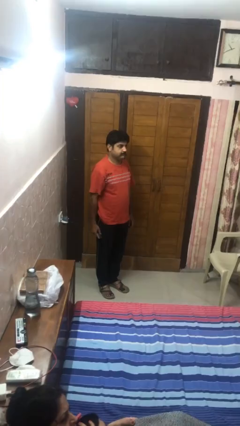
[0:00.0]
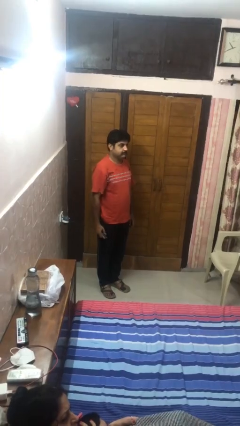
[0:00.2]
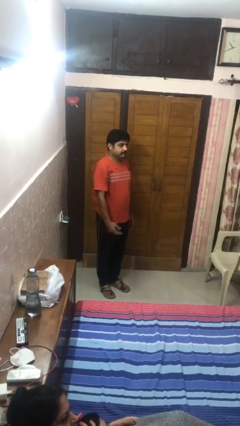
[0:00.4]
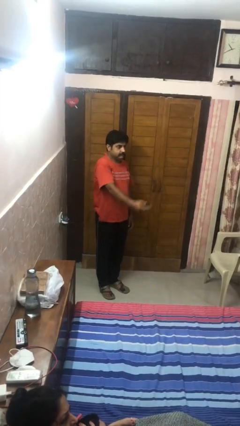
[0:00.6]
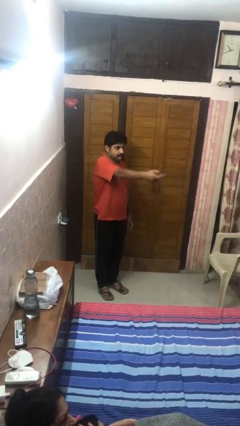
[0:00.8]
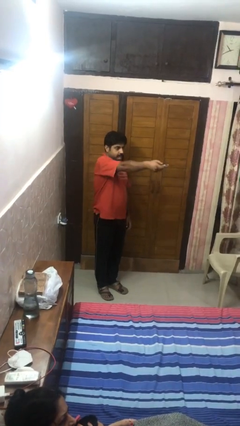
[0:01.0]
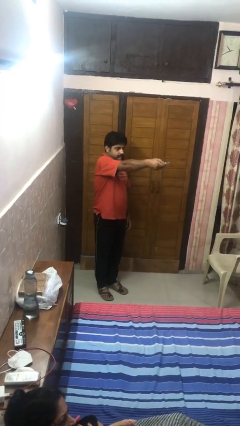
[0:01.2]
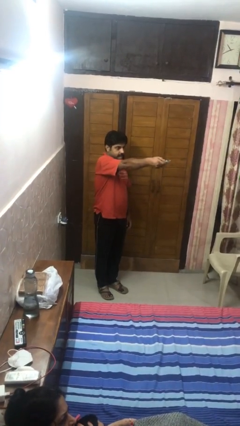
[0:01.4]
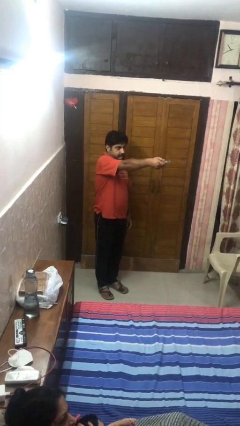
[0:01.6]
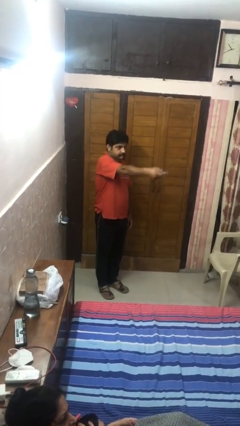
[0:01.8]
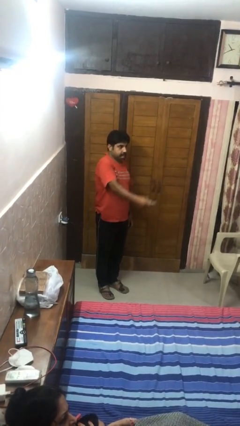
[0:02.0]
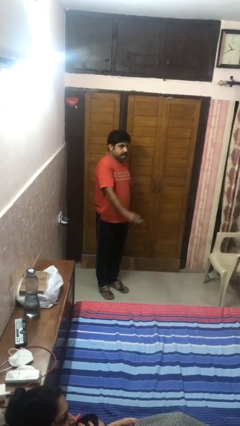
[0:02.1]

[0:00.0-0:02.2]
person uses television remote

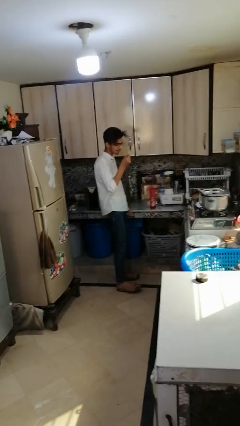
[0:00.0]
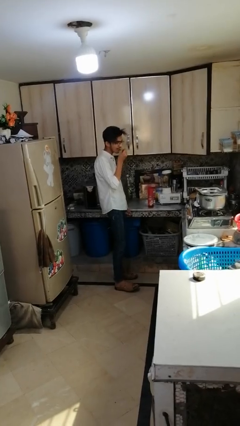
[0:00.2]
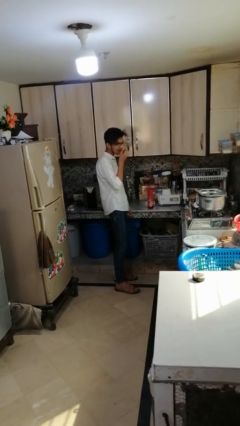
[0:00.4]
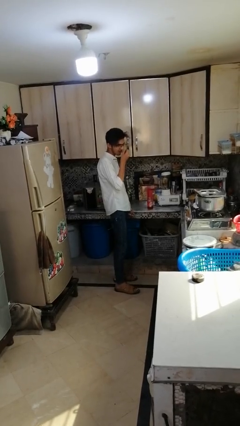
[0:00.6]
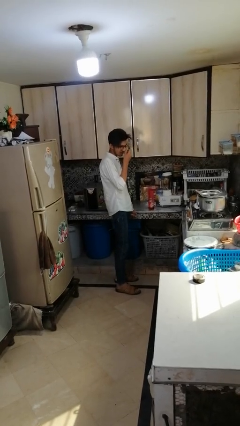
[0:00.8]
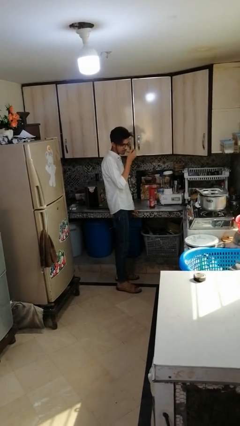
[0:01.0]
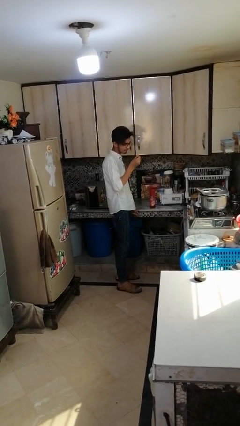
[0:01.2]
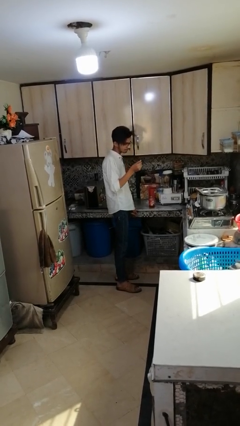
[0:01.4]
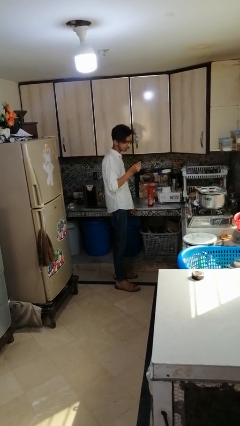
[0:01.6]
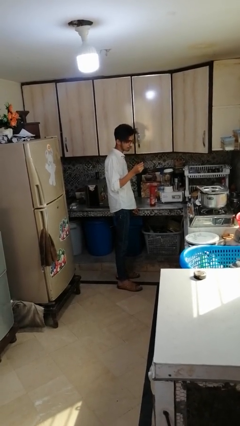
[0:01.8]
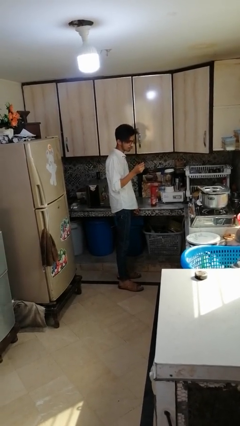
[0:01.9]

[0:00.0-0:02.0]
person eats with utensil

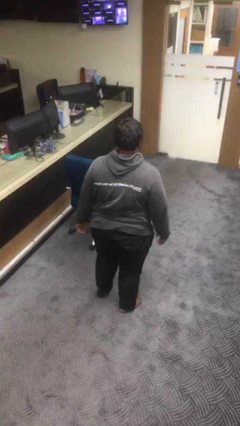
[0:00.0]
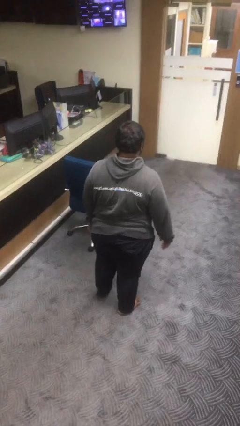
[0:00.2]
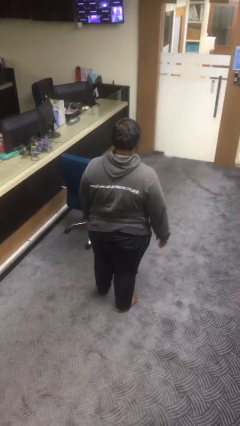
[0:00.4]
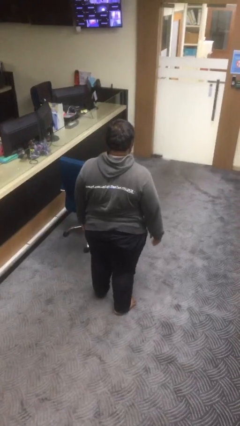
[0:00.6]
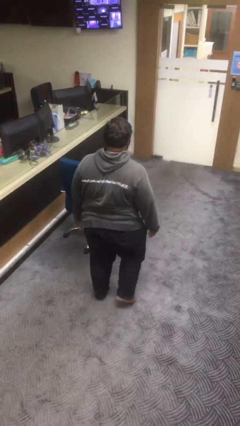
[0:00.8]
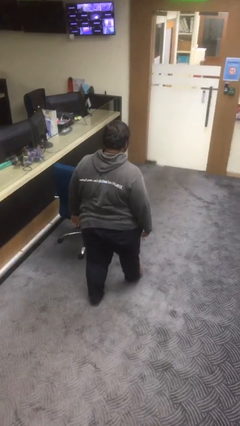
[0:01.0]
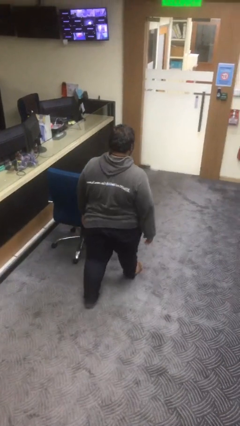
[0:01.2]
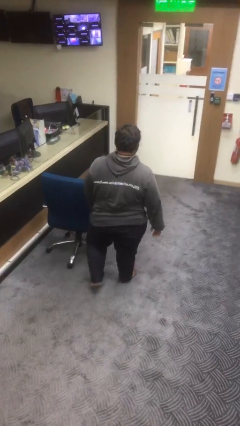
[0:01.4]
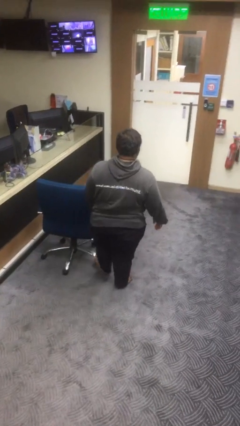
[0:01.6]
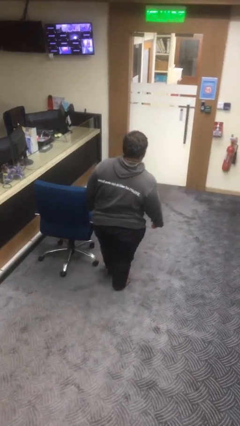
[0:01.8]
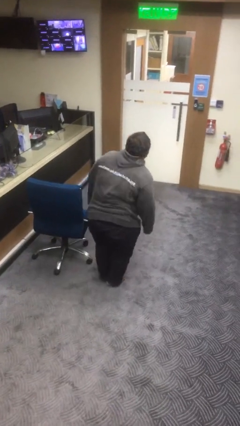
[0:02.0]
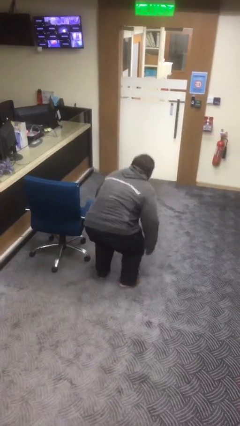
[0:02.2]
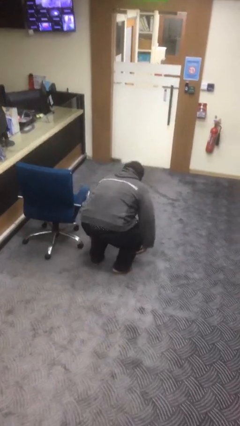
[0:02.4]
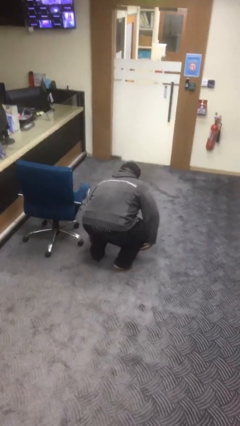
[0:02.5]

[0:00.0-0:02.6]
person stubs toe

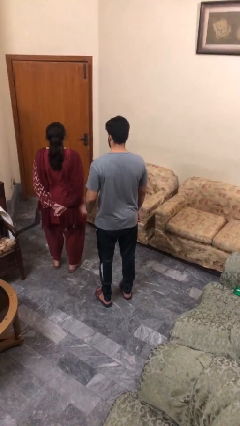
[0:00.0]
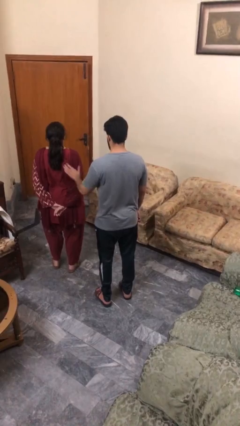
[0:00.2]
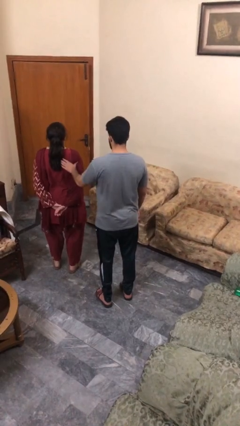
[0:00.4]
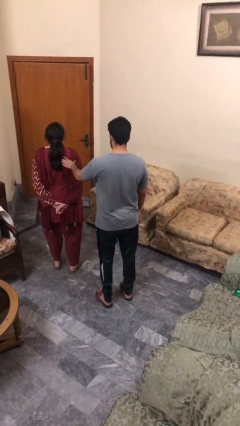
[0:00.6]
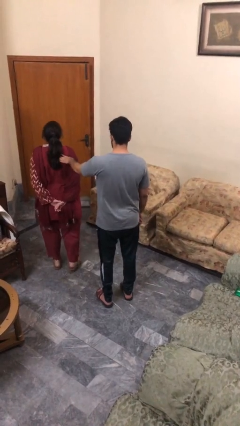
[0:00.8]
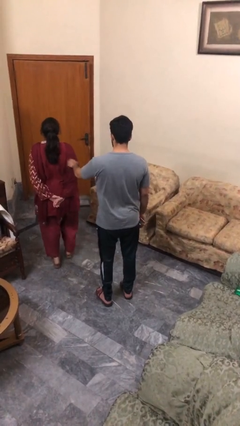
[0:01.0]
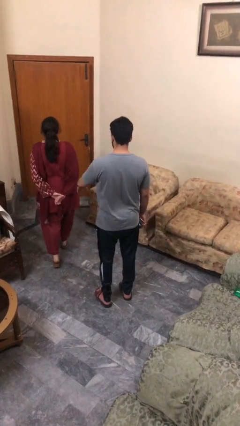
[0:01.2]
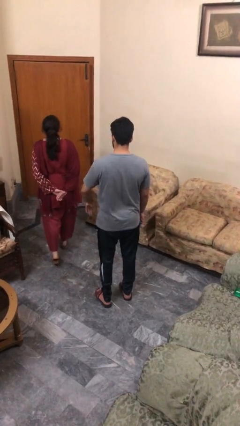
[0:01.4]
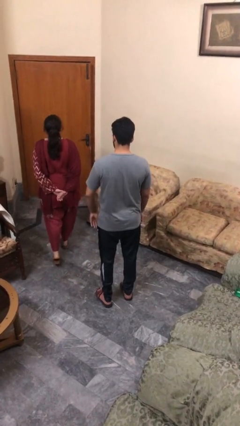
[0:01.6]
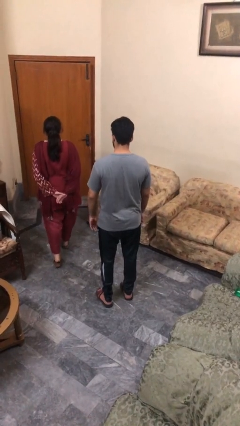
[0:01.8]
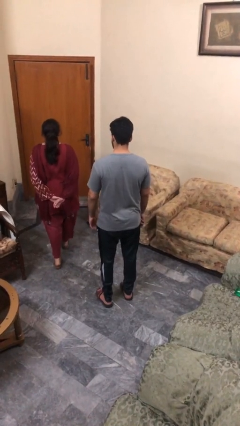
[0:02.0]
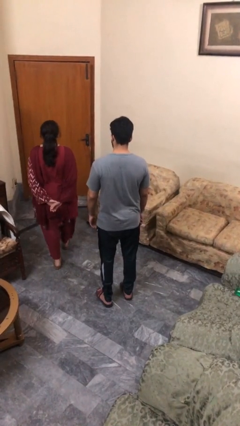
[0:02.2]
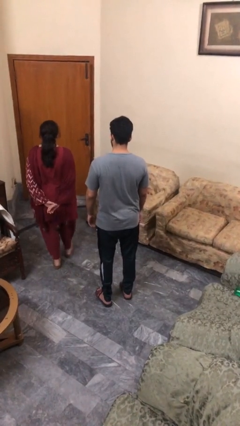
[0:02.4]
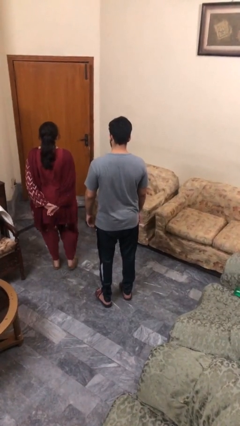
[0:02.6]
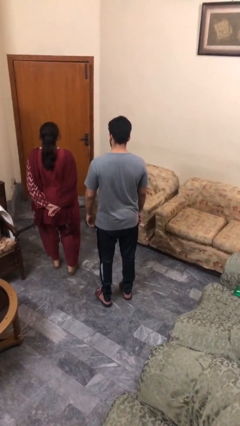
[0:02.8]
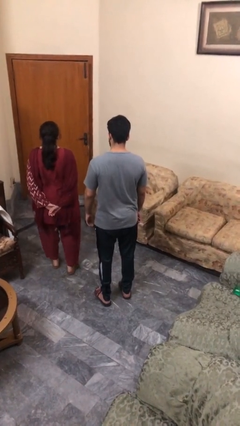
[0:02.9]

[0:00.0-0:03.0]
person shoves person

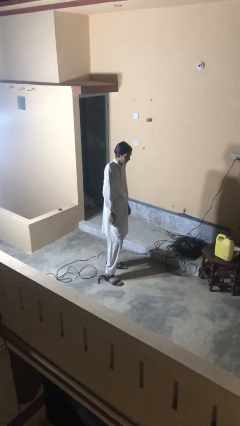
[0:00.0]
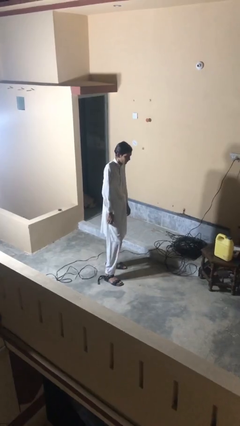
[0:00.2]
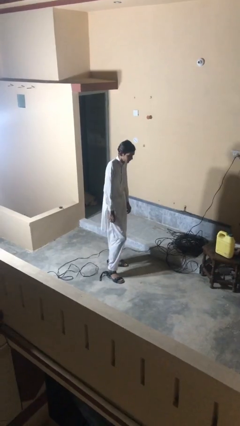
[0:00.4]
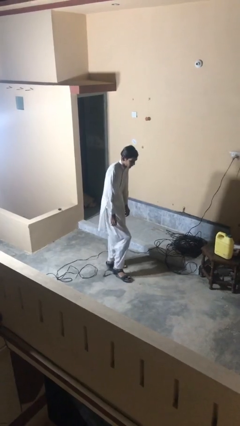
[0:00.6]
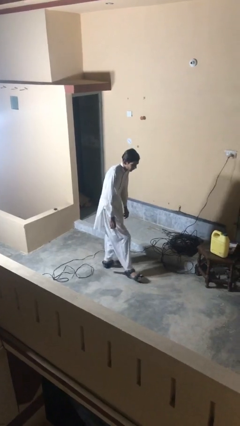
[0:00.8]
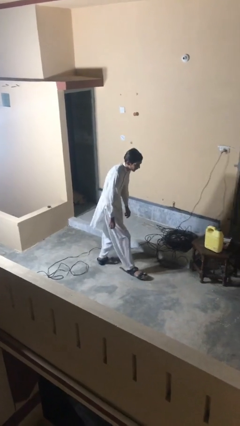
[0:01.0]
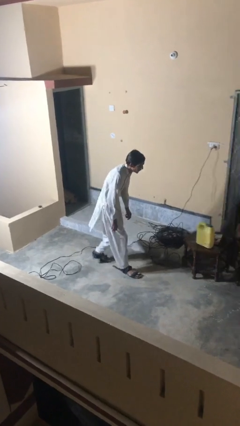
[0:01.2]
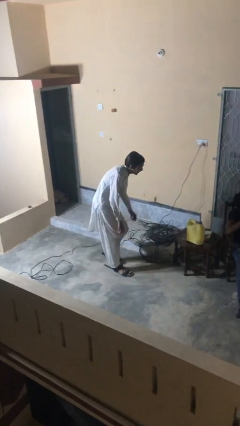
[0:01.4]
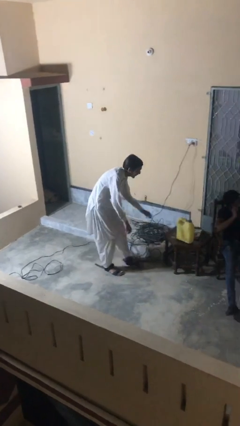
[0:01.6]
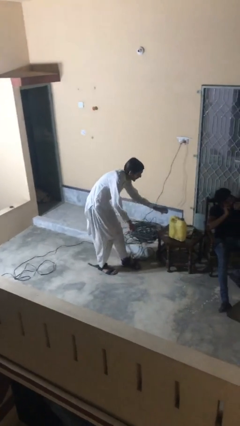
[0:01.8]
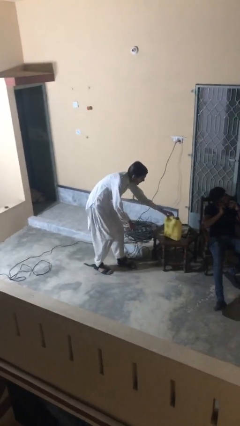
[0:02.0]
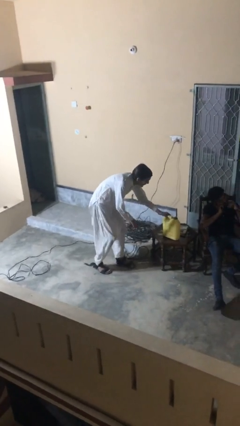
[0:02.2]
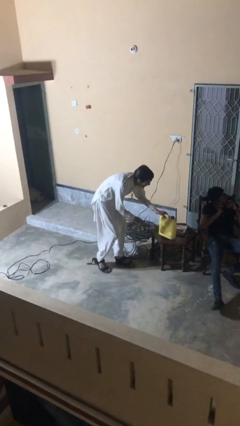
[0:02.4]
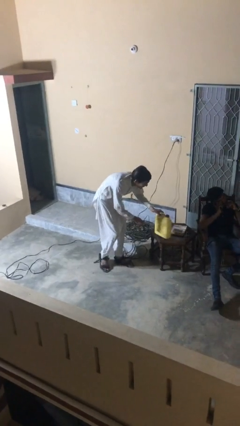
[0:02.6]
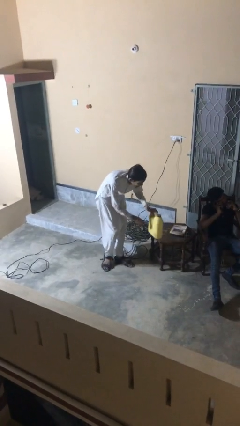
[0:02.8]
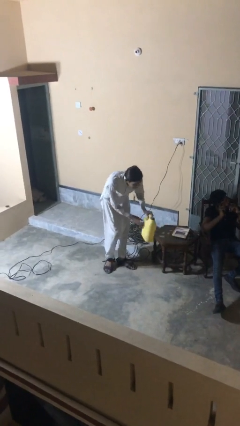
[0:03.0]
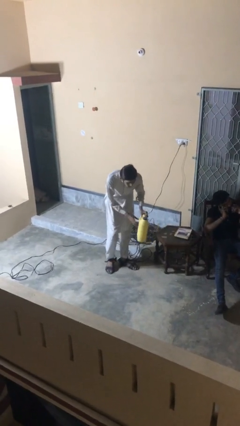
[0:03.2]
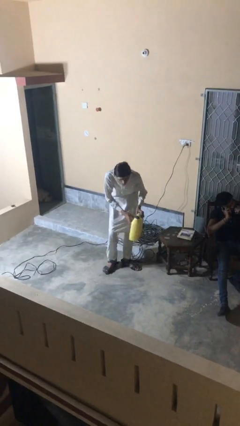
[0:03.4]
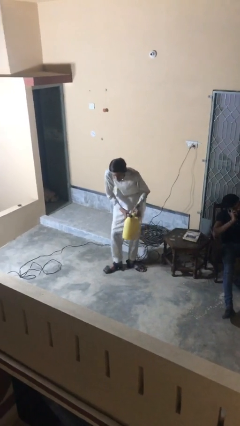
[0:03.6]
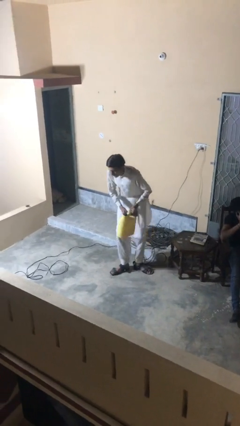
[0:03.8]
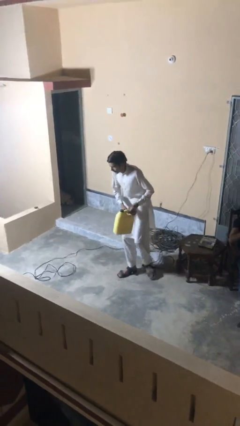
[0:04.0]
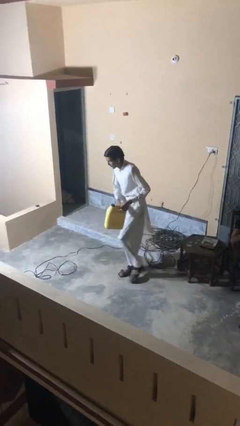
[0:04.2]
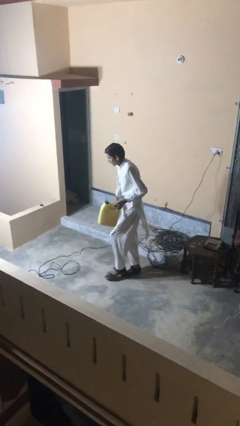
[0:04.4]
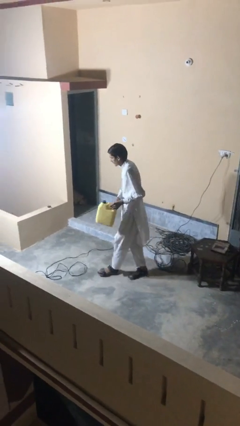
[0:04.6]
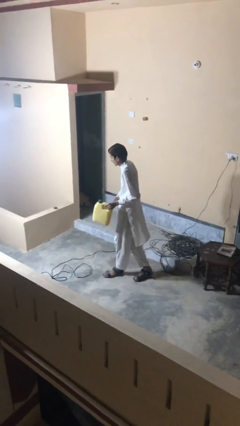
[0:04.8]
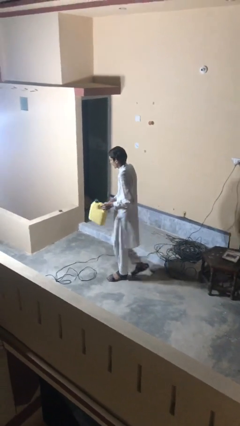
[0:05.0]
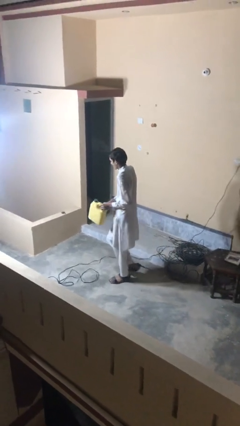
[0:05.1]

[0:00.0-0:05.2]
person steals object from person

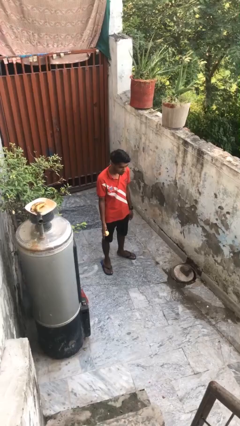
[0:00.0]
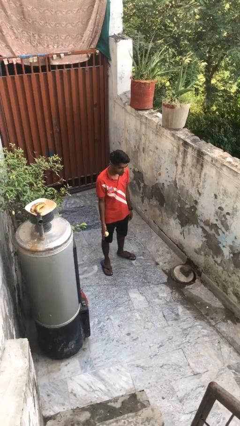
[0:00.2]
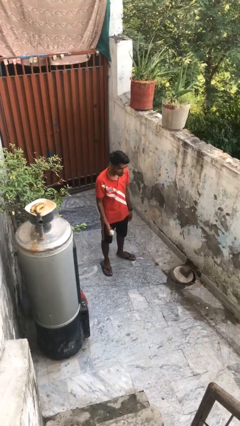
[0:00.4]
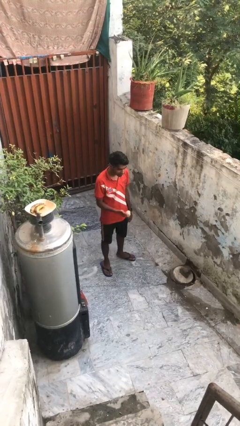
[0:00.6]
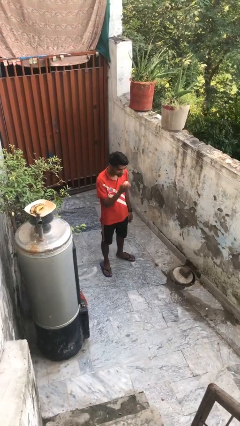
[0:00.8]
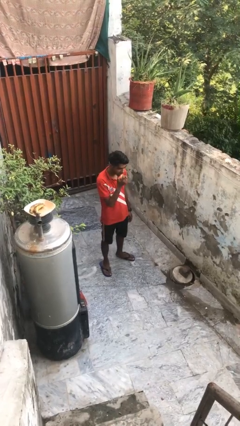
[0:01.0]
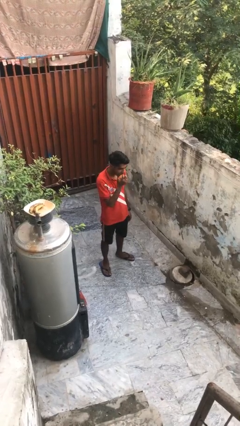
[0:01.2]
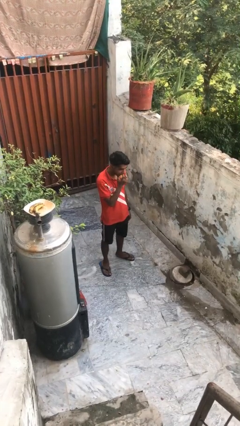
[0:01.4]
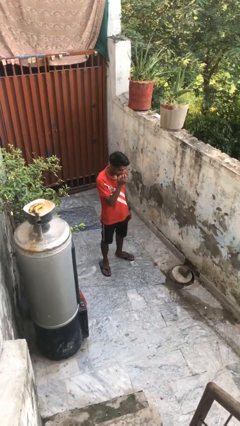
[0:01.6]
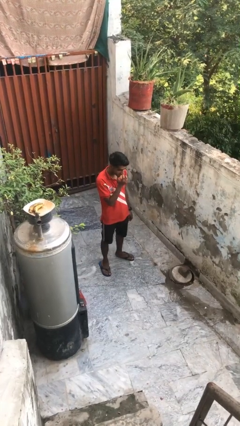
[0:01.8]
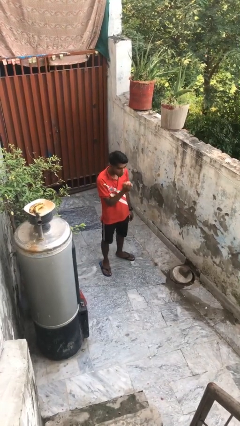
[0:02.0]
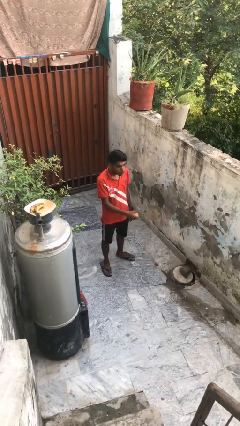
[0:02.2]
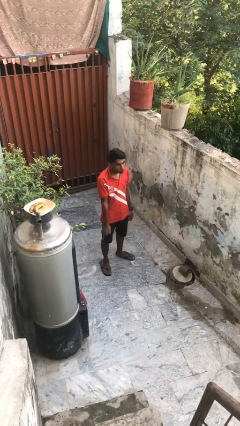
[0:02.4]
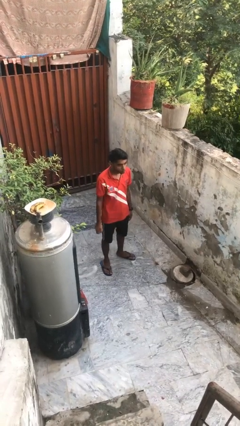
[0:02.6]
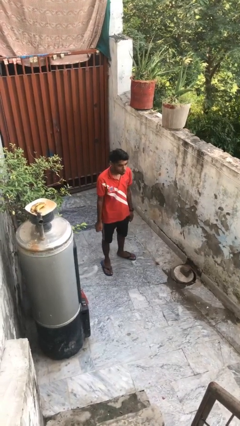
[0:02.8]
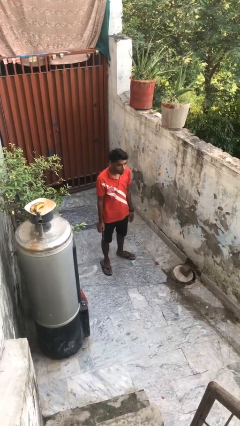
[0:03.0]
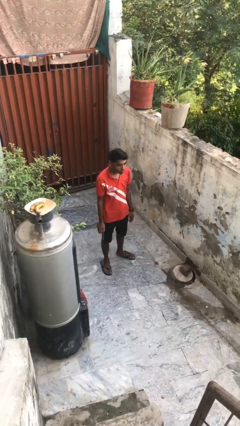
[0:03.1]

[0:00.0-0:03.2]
person eats apple
